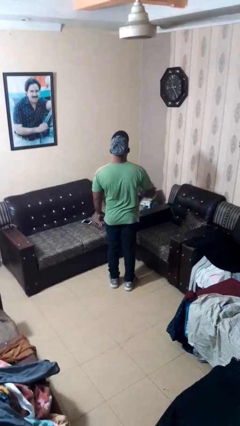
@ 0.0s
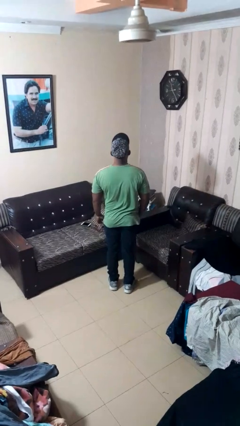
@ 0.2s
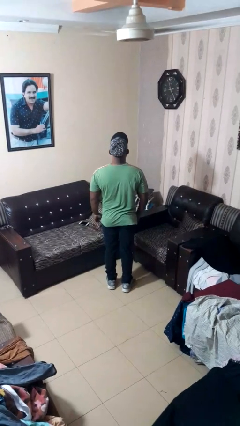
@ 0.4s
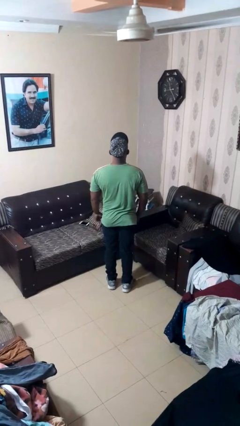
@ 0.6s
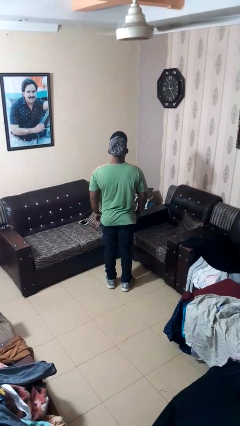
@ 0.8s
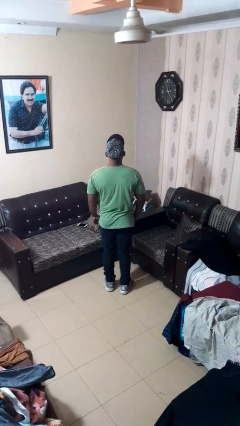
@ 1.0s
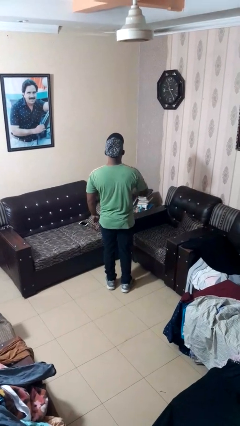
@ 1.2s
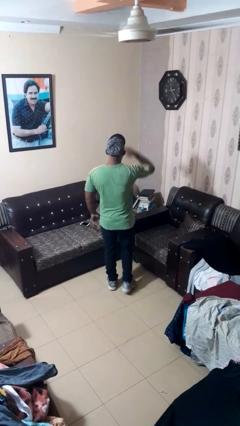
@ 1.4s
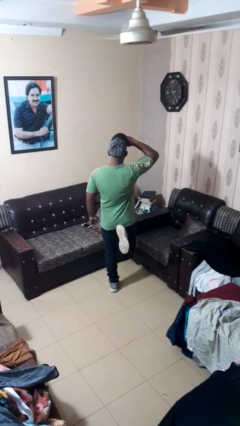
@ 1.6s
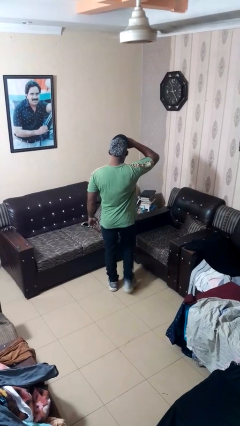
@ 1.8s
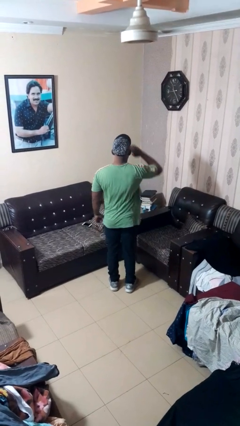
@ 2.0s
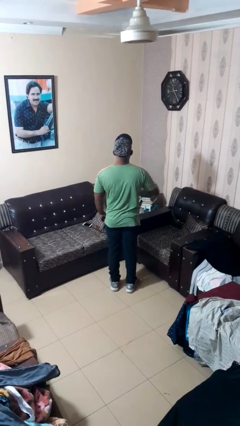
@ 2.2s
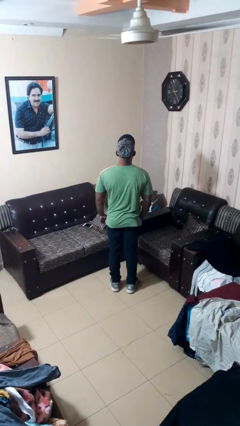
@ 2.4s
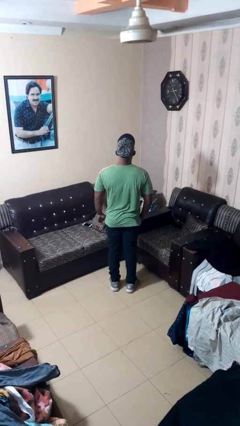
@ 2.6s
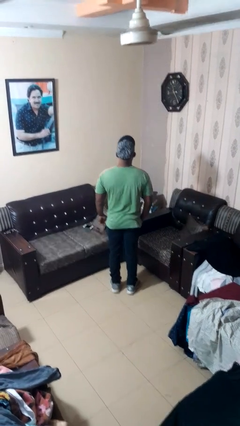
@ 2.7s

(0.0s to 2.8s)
person salutes

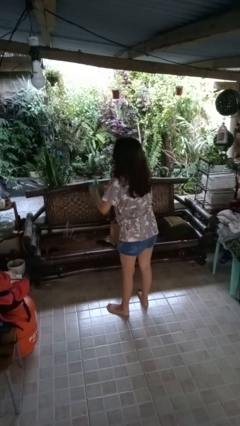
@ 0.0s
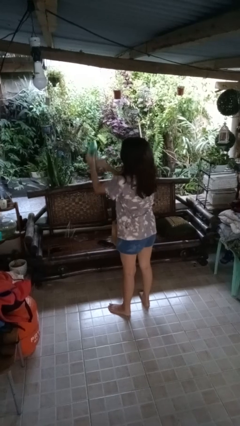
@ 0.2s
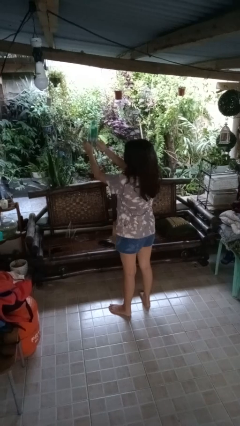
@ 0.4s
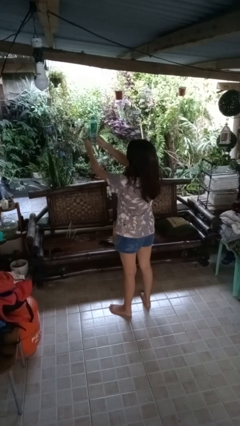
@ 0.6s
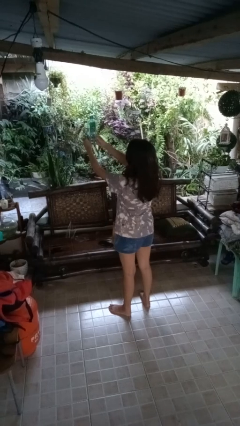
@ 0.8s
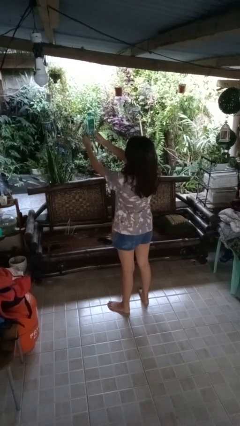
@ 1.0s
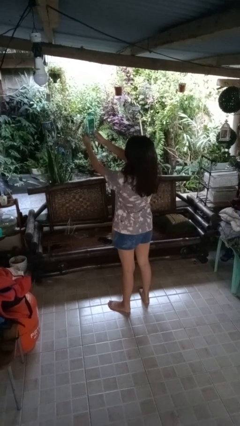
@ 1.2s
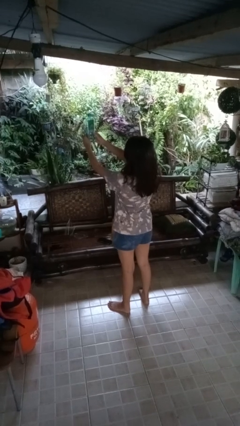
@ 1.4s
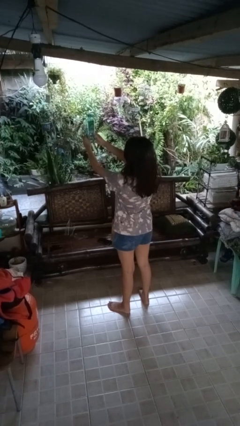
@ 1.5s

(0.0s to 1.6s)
person catches dropped object

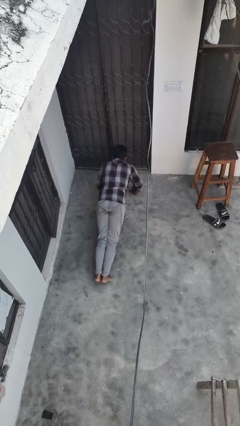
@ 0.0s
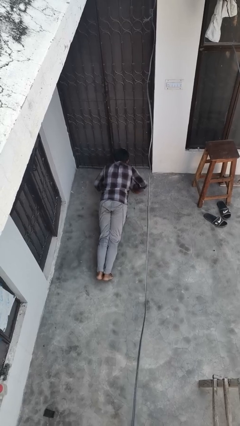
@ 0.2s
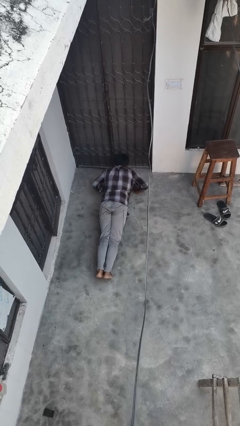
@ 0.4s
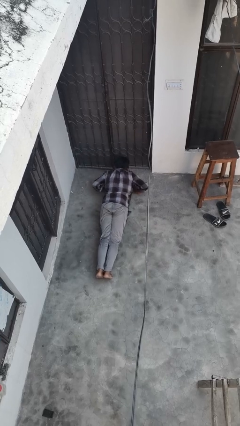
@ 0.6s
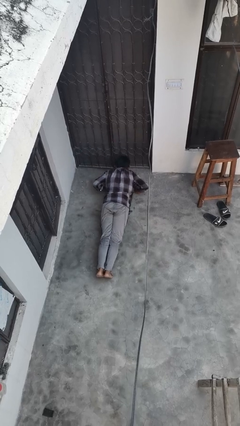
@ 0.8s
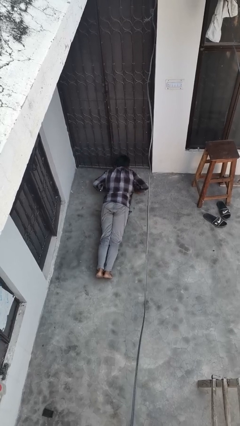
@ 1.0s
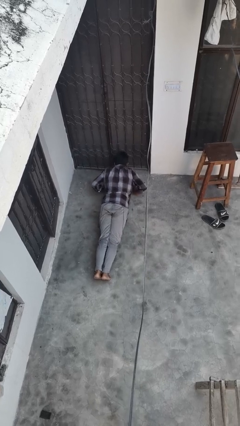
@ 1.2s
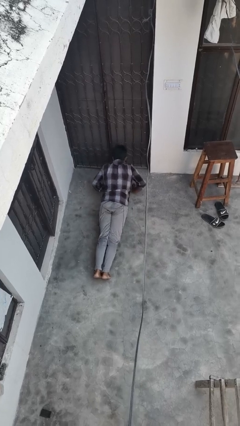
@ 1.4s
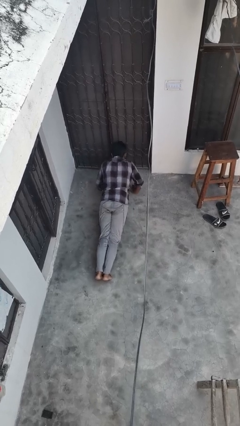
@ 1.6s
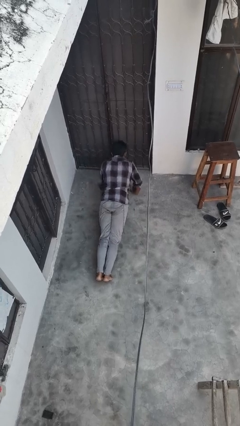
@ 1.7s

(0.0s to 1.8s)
person exercises with pushup

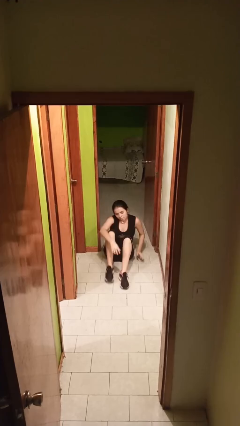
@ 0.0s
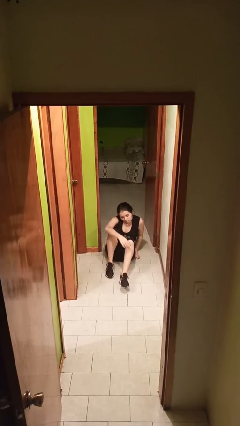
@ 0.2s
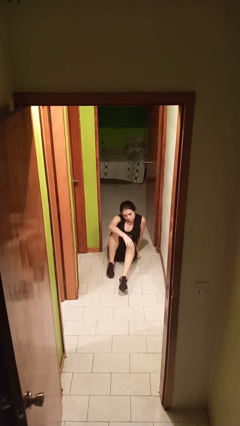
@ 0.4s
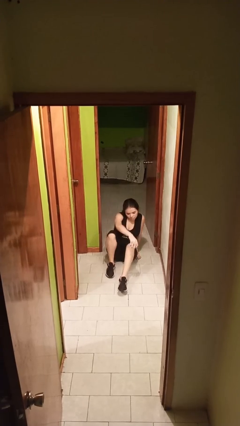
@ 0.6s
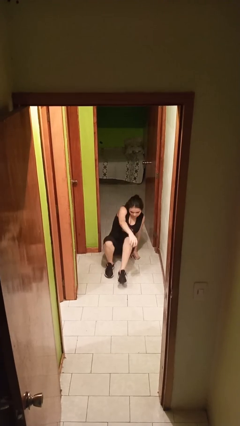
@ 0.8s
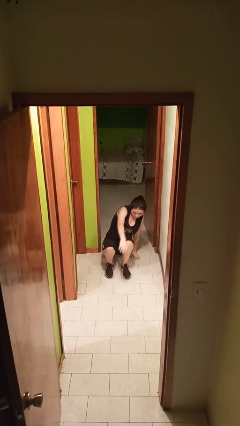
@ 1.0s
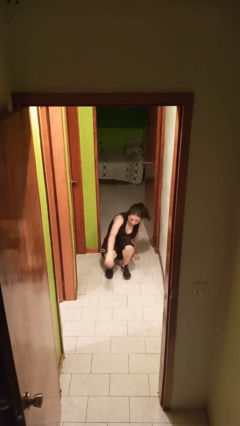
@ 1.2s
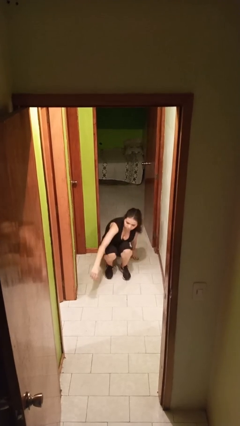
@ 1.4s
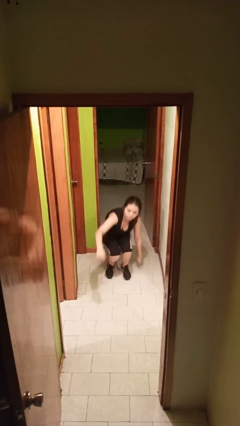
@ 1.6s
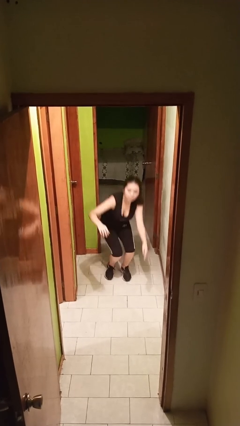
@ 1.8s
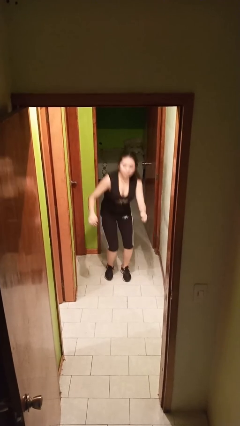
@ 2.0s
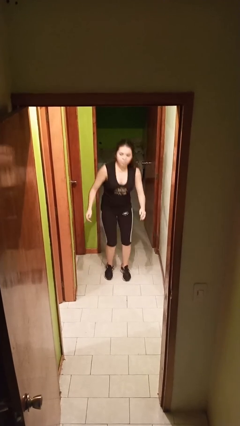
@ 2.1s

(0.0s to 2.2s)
person stands up

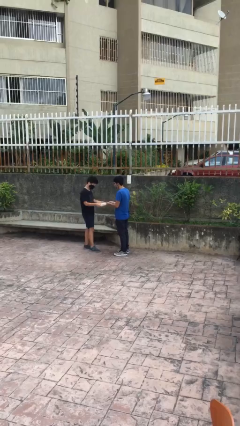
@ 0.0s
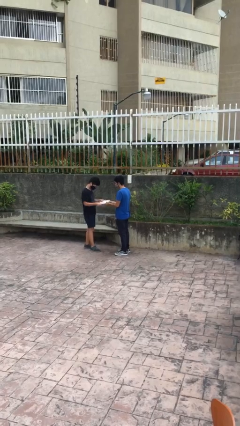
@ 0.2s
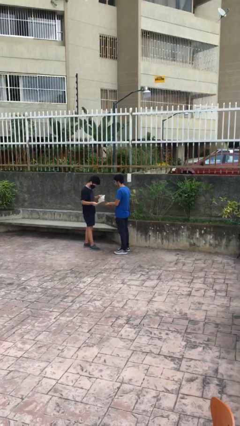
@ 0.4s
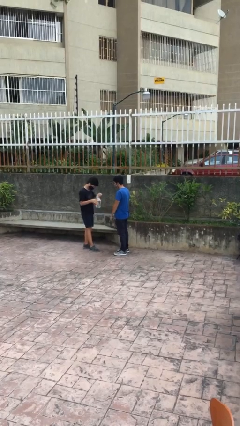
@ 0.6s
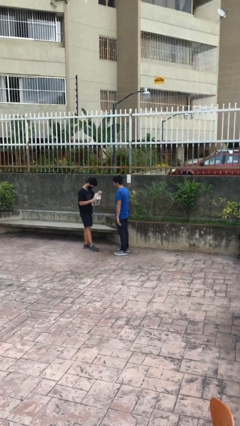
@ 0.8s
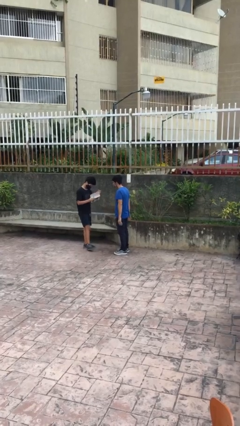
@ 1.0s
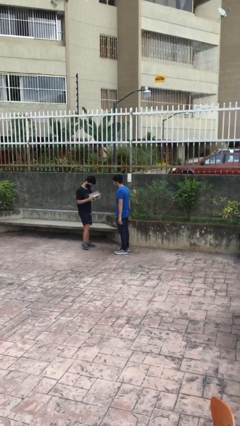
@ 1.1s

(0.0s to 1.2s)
person transfers object to person

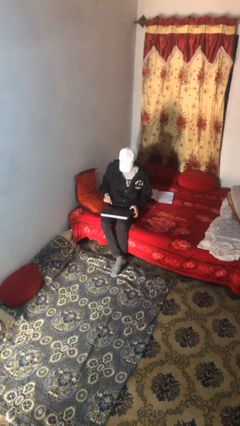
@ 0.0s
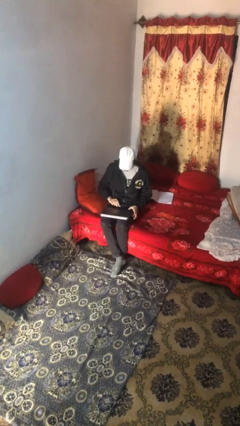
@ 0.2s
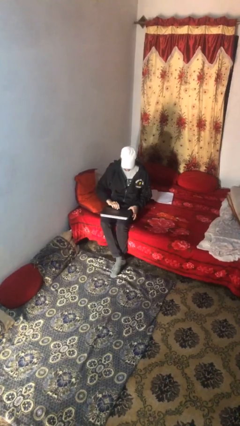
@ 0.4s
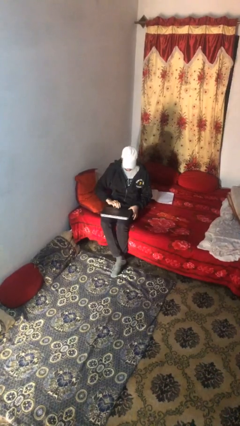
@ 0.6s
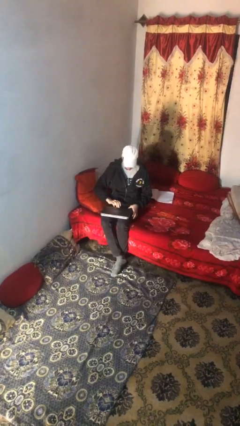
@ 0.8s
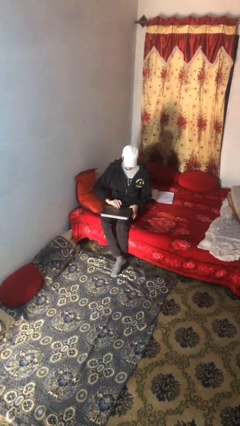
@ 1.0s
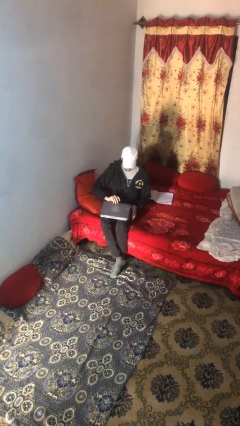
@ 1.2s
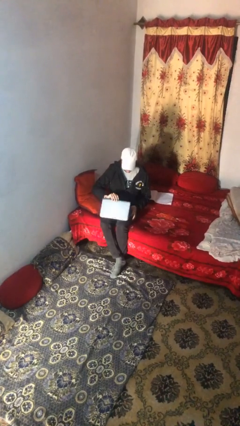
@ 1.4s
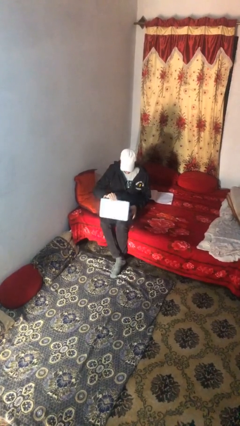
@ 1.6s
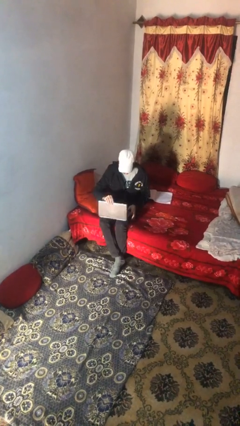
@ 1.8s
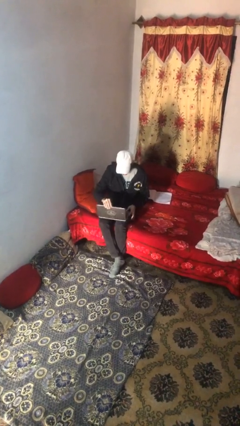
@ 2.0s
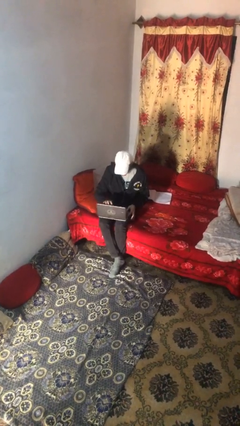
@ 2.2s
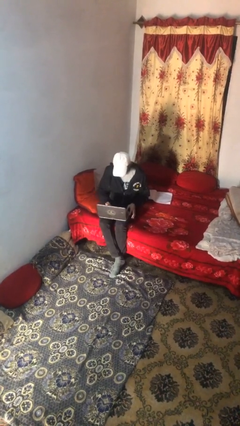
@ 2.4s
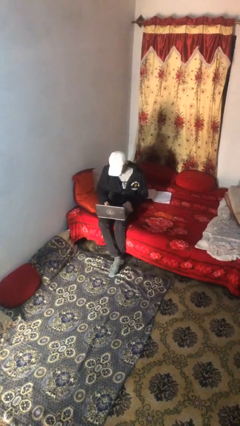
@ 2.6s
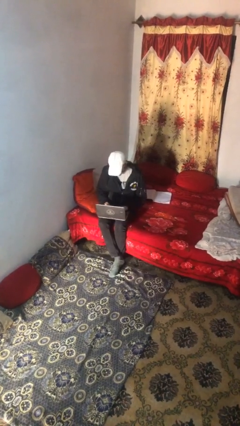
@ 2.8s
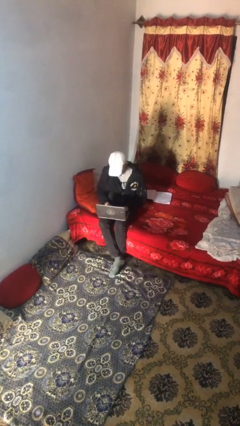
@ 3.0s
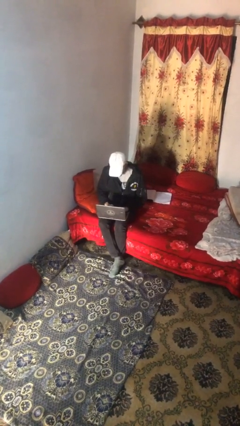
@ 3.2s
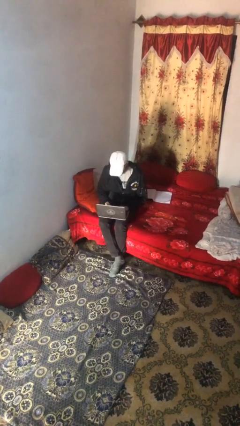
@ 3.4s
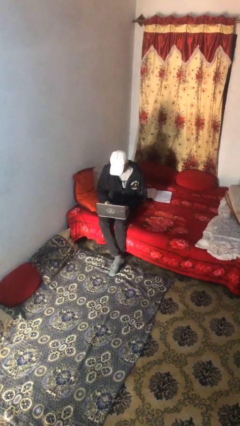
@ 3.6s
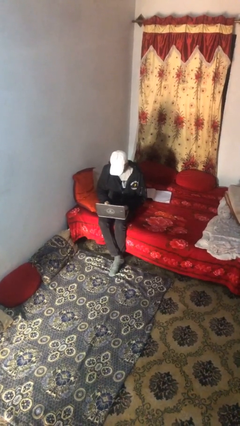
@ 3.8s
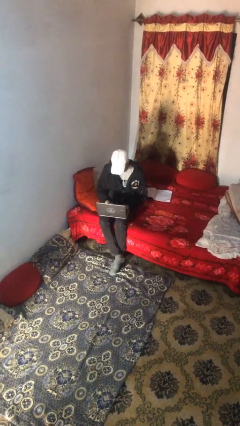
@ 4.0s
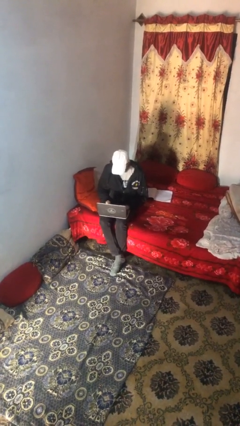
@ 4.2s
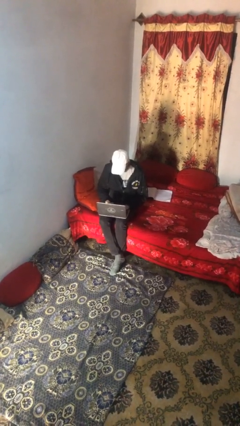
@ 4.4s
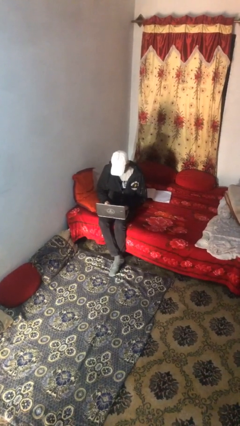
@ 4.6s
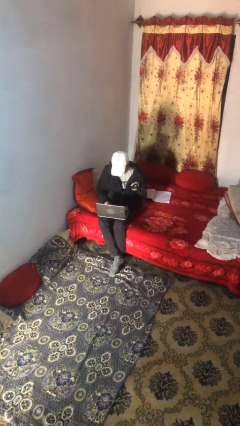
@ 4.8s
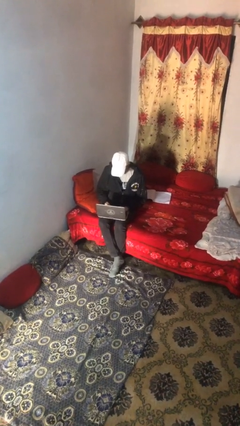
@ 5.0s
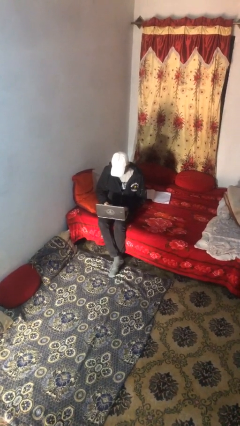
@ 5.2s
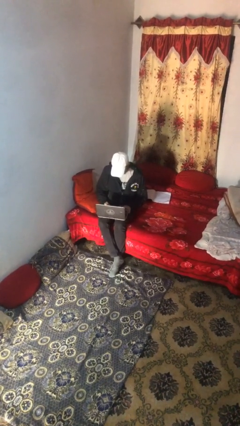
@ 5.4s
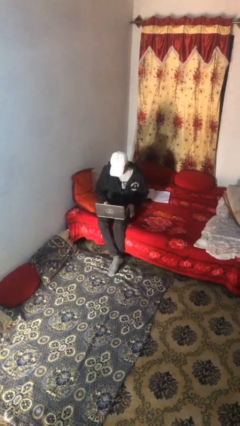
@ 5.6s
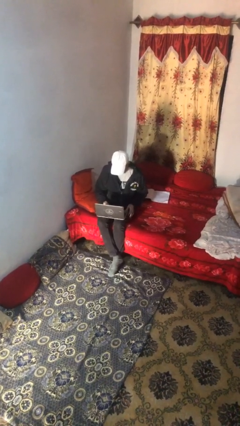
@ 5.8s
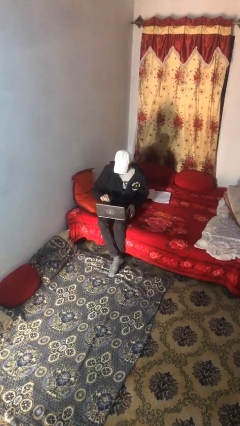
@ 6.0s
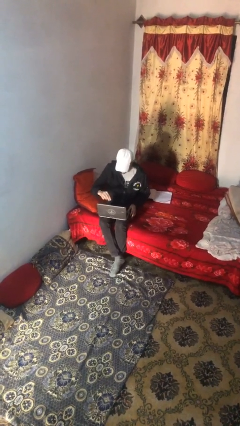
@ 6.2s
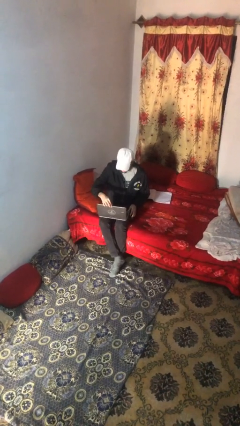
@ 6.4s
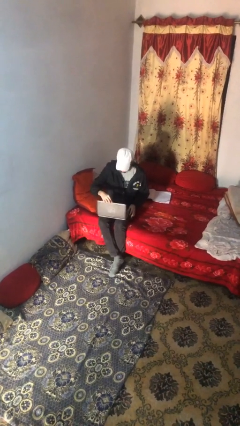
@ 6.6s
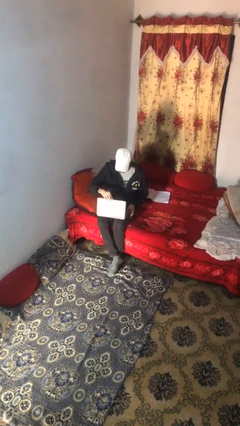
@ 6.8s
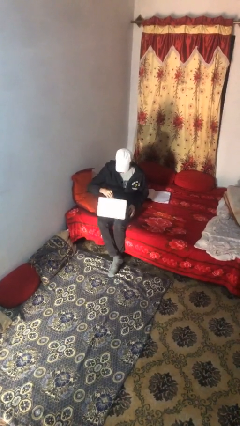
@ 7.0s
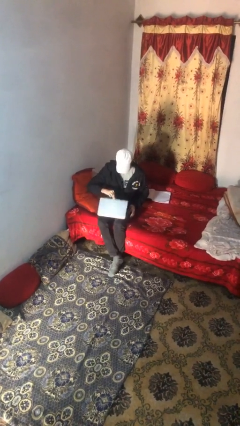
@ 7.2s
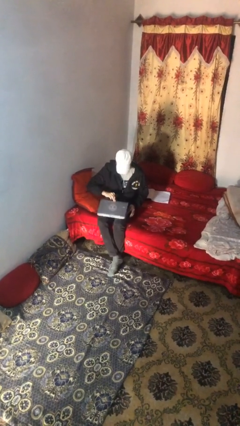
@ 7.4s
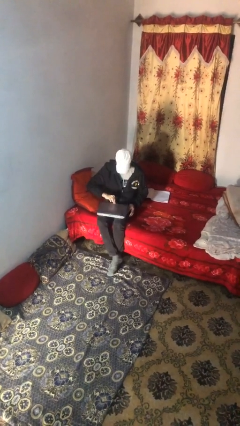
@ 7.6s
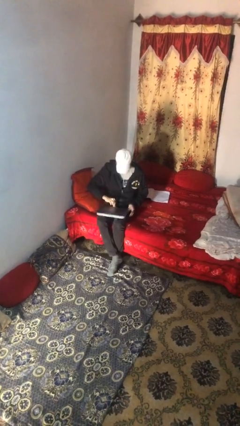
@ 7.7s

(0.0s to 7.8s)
person interacts with laptop
